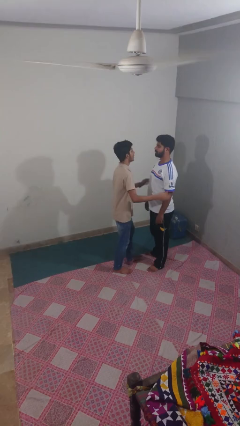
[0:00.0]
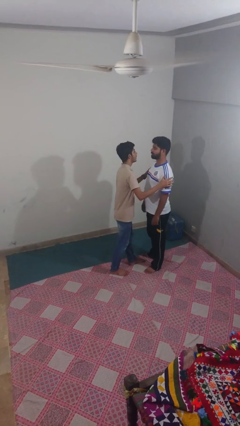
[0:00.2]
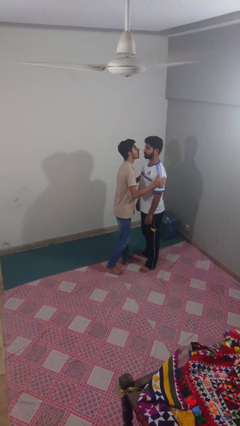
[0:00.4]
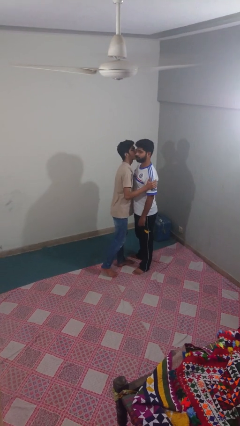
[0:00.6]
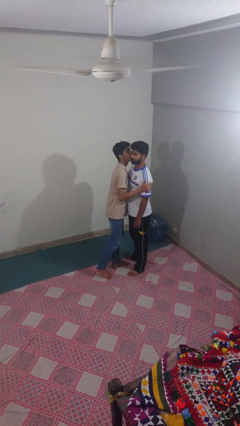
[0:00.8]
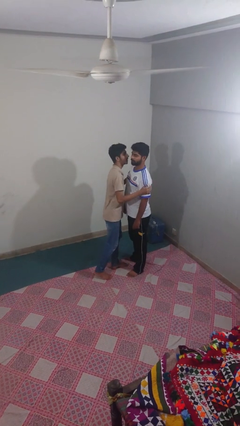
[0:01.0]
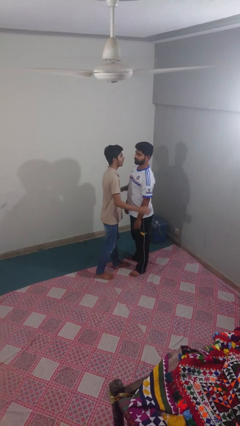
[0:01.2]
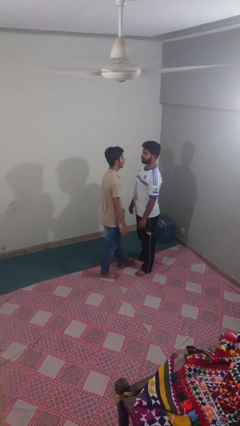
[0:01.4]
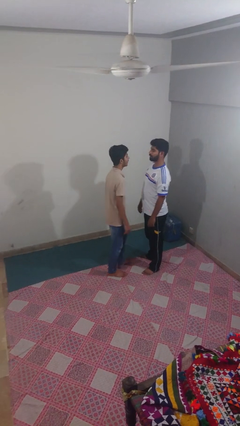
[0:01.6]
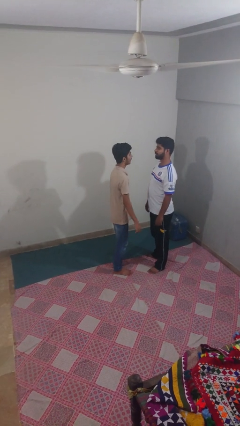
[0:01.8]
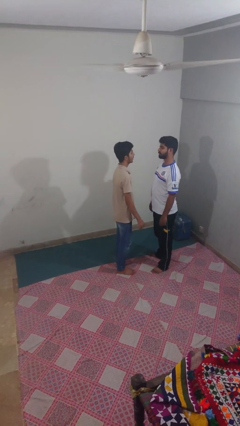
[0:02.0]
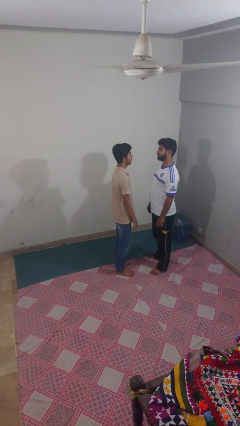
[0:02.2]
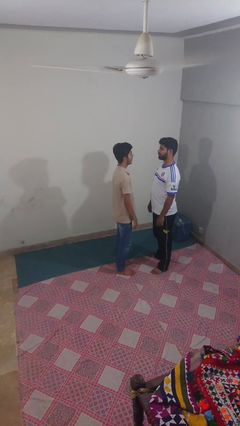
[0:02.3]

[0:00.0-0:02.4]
person kisses cheek of person

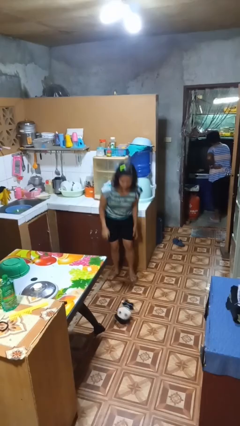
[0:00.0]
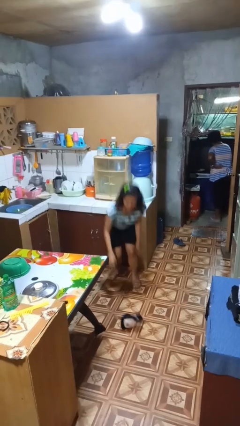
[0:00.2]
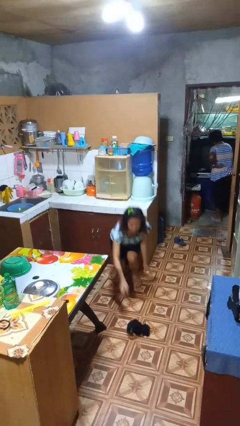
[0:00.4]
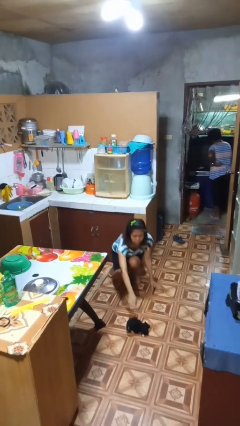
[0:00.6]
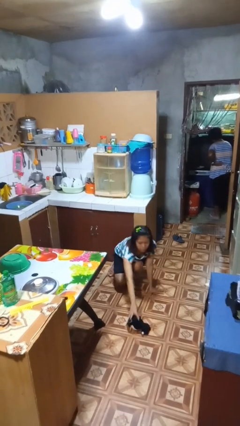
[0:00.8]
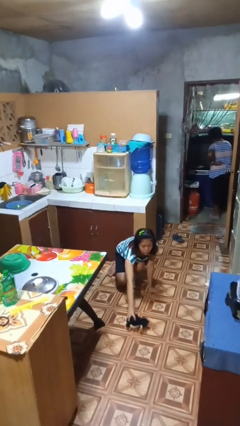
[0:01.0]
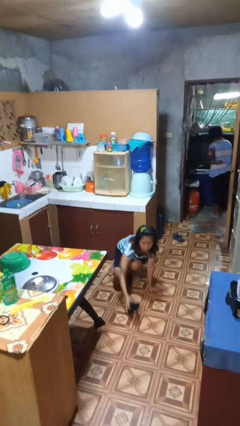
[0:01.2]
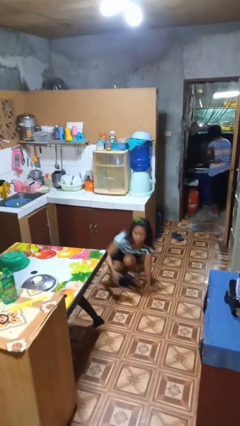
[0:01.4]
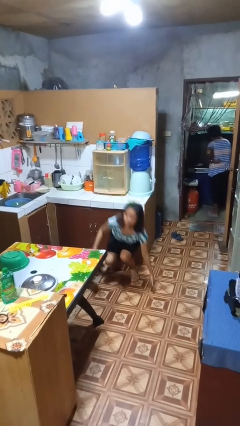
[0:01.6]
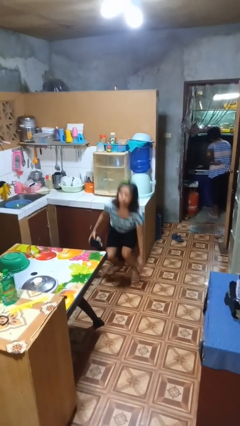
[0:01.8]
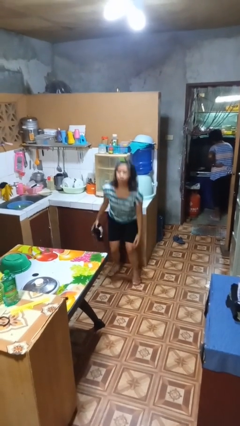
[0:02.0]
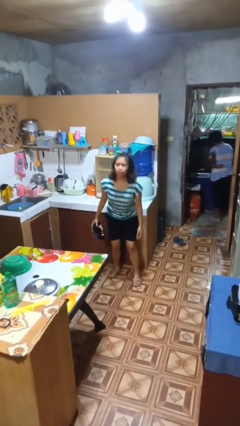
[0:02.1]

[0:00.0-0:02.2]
person picks up object from floor

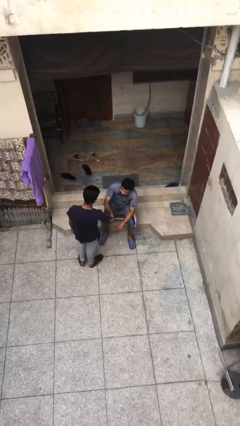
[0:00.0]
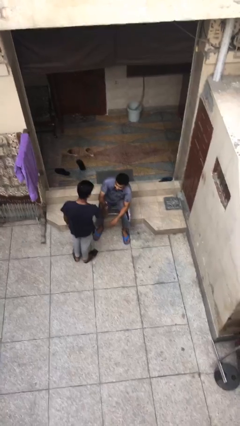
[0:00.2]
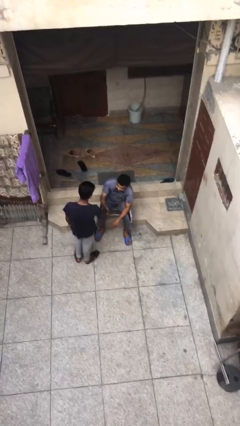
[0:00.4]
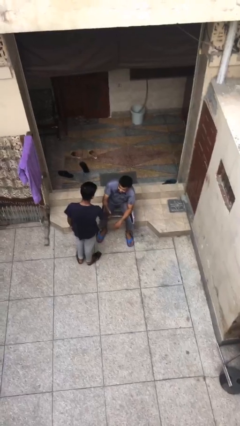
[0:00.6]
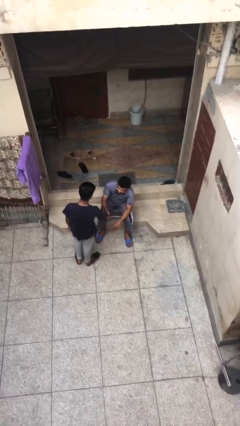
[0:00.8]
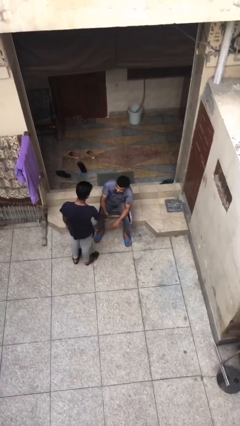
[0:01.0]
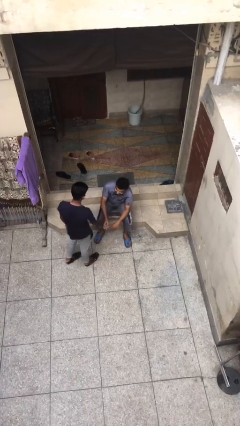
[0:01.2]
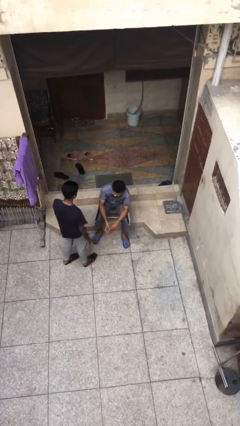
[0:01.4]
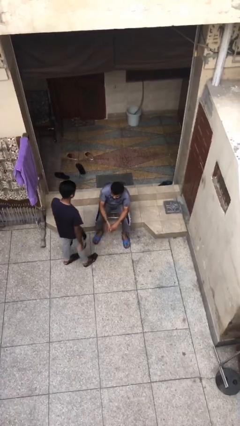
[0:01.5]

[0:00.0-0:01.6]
person shakes hand

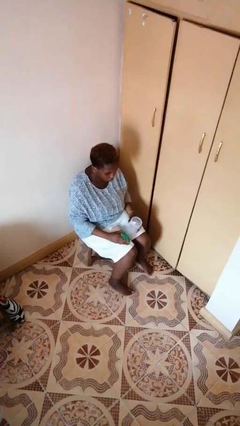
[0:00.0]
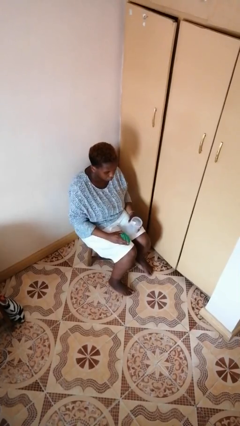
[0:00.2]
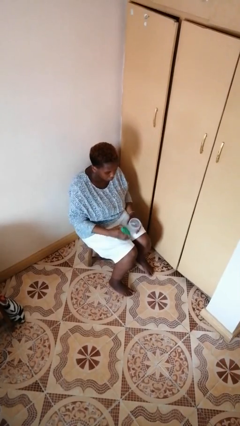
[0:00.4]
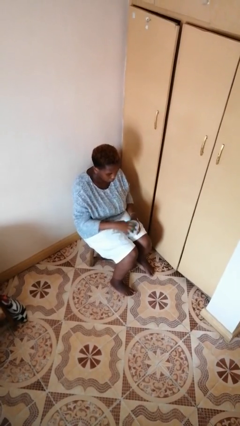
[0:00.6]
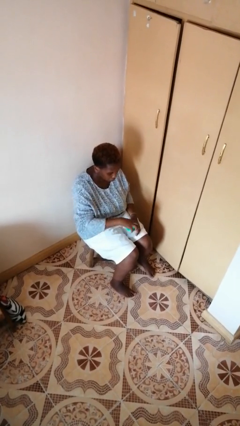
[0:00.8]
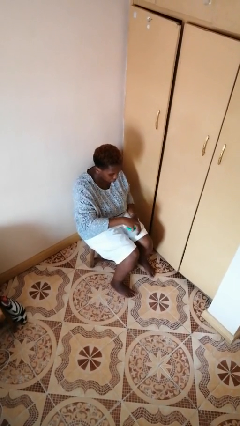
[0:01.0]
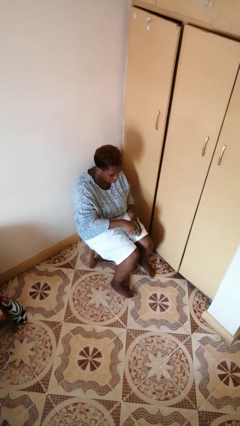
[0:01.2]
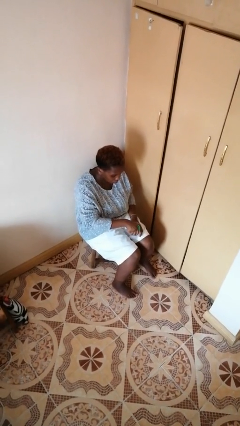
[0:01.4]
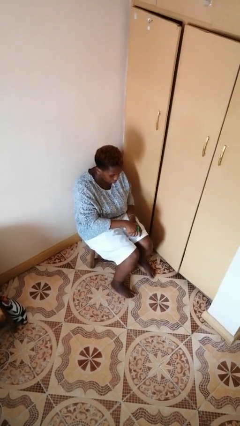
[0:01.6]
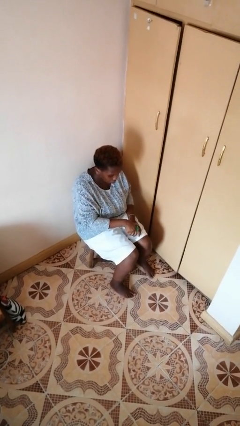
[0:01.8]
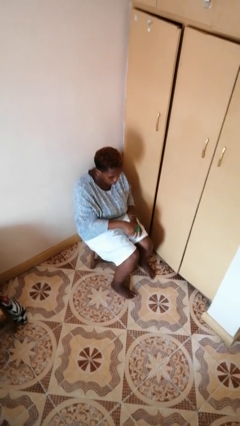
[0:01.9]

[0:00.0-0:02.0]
person closes jar

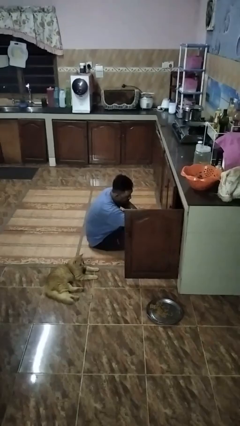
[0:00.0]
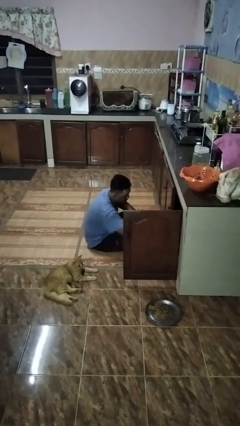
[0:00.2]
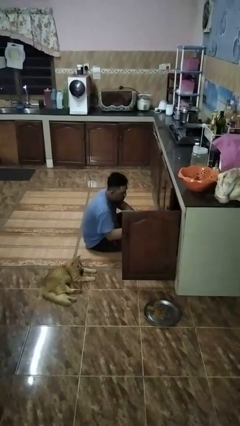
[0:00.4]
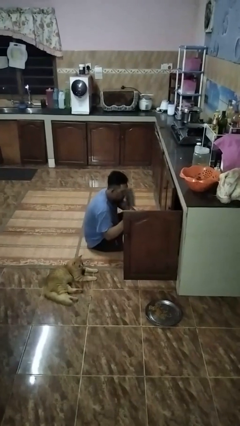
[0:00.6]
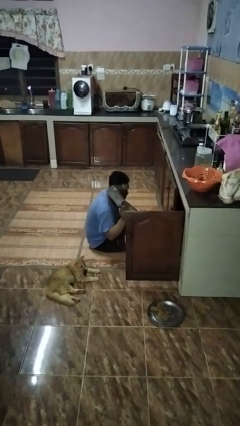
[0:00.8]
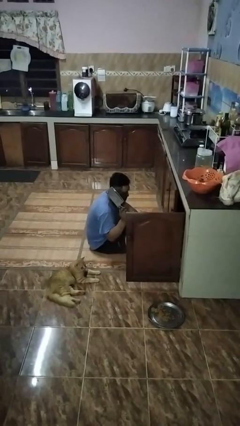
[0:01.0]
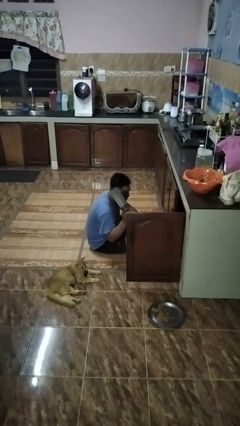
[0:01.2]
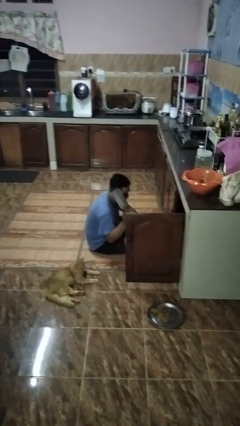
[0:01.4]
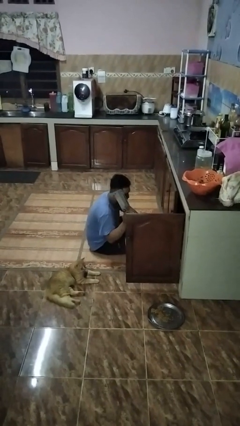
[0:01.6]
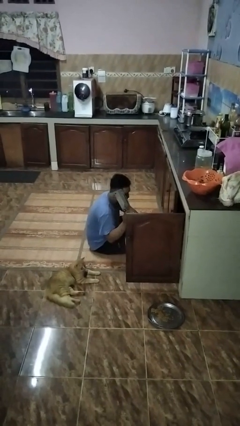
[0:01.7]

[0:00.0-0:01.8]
person takes object from kitchen drawer

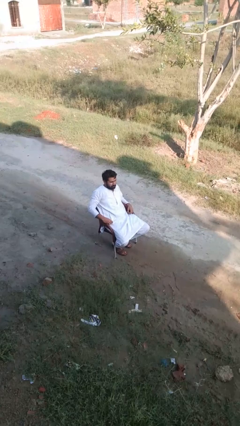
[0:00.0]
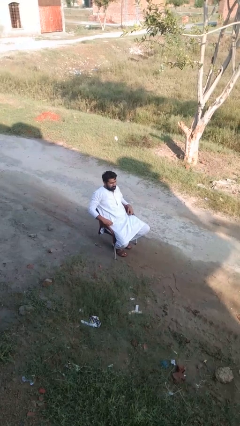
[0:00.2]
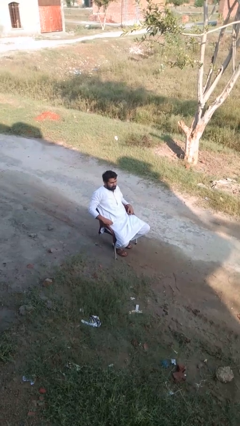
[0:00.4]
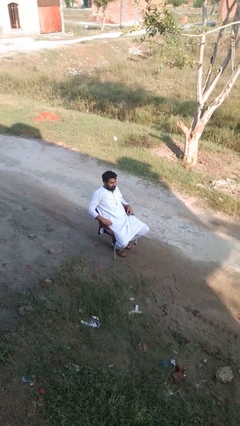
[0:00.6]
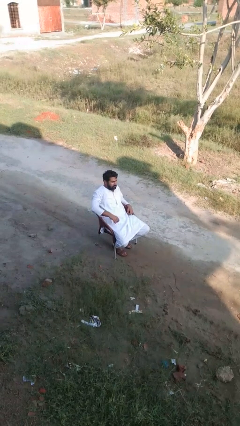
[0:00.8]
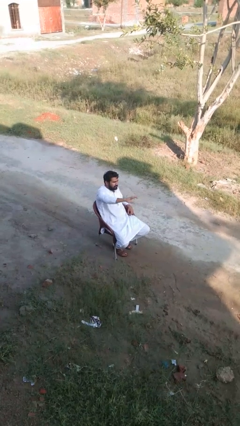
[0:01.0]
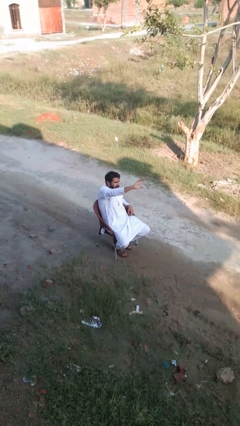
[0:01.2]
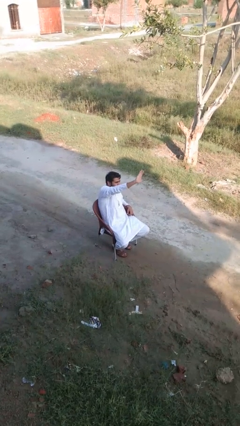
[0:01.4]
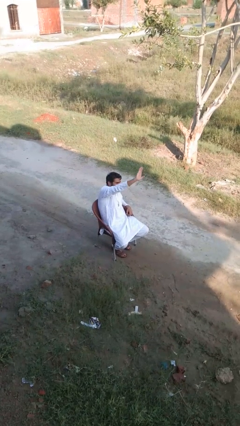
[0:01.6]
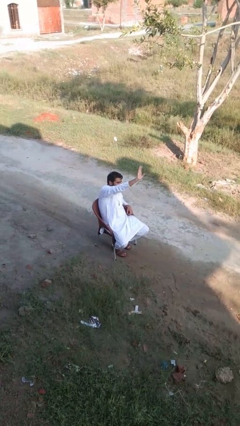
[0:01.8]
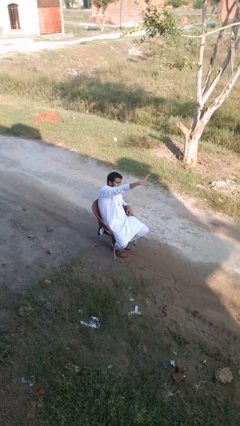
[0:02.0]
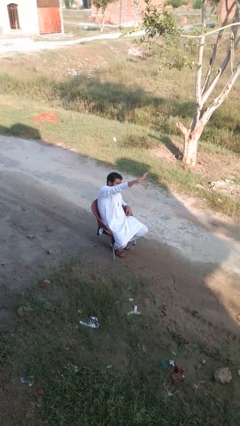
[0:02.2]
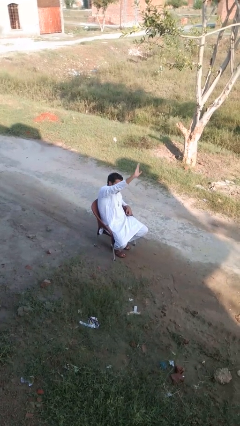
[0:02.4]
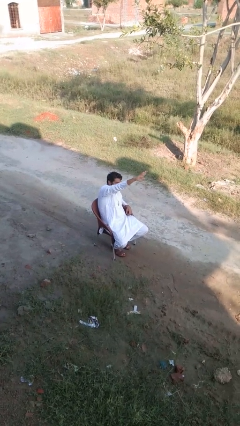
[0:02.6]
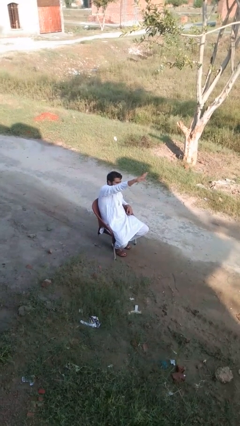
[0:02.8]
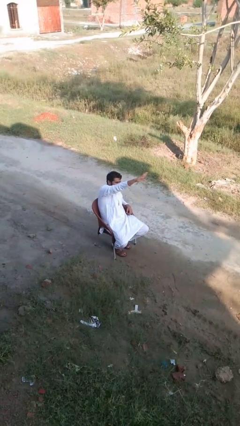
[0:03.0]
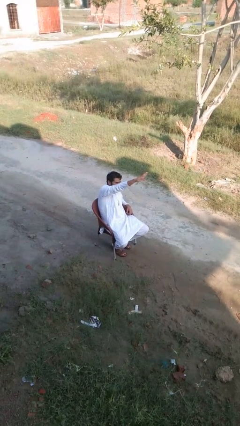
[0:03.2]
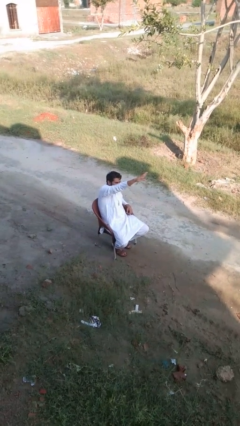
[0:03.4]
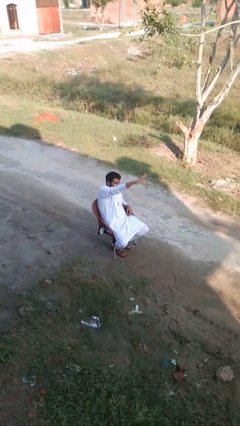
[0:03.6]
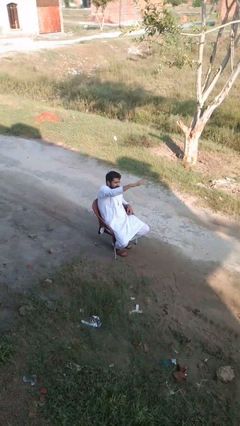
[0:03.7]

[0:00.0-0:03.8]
person gestures stop

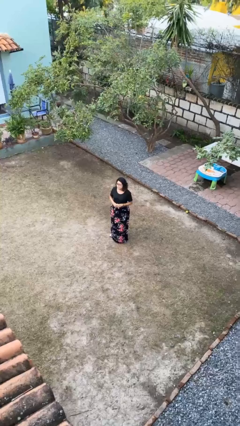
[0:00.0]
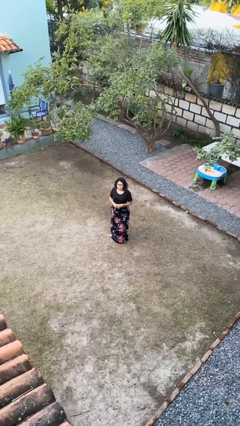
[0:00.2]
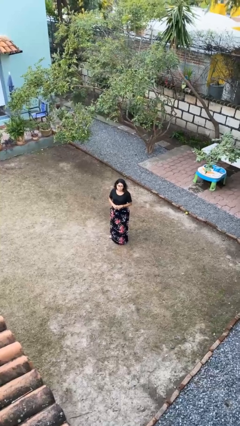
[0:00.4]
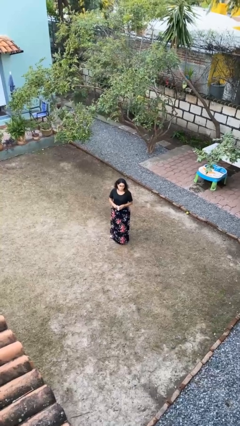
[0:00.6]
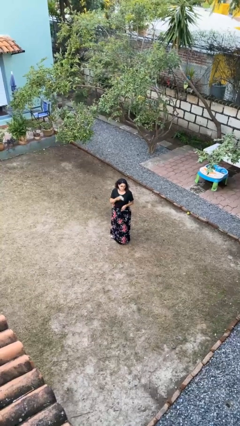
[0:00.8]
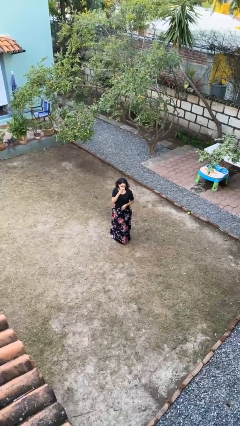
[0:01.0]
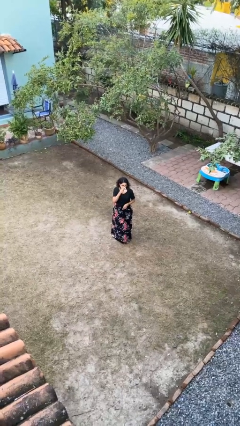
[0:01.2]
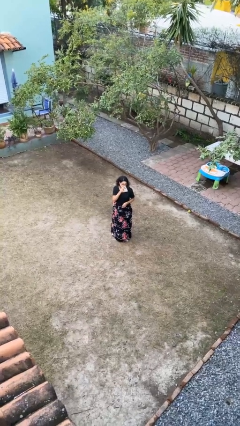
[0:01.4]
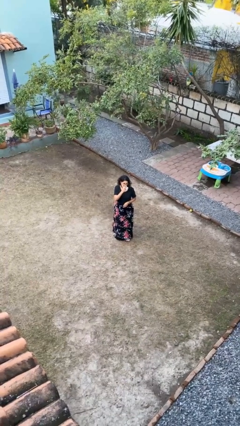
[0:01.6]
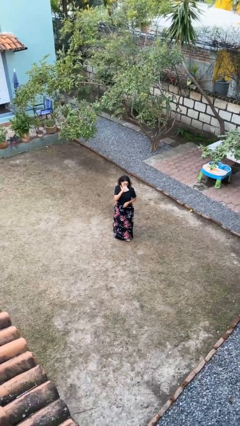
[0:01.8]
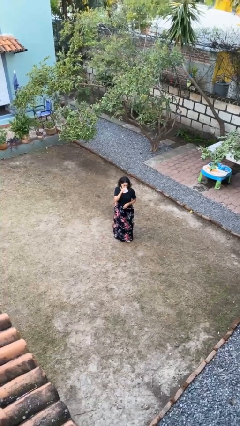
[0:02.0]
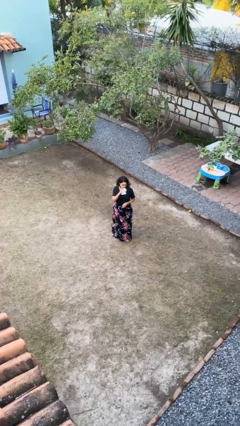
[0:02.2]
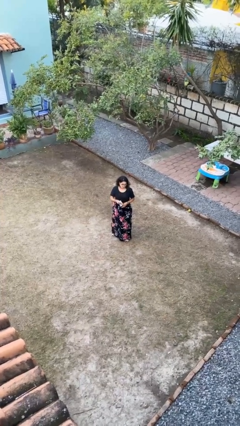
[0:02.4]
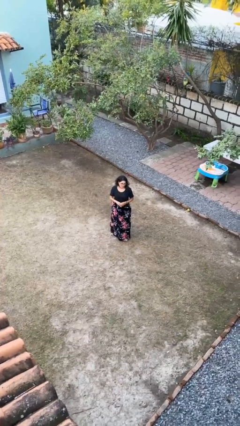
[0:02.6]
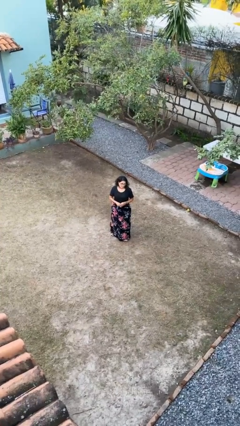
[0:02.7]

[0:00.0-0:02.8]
person wipes mouth with napkin

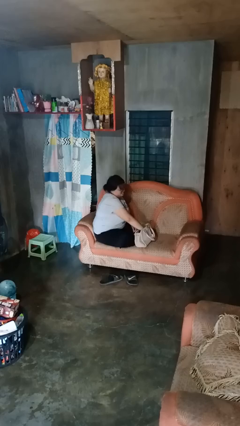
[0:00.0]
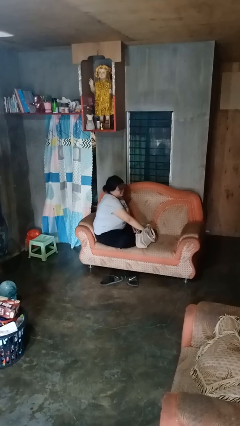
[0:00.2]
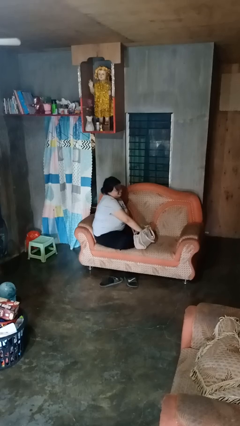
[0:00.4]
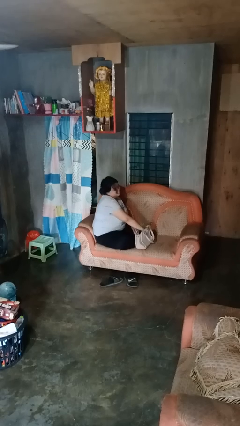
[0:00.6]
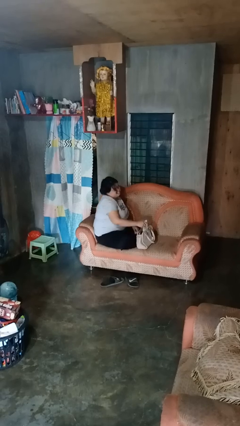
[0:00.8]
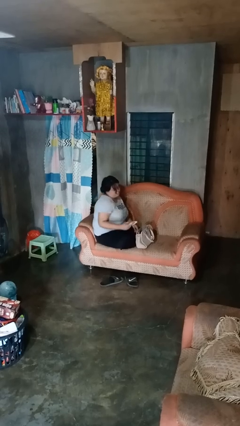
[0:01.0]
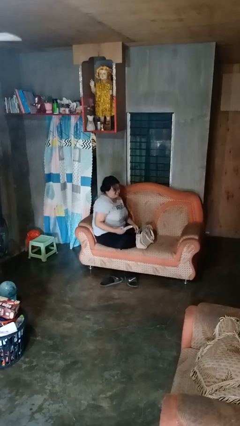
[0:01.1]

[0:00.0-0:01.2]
person takes object from purse
